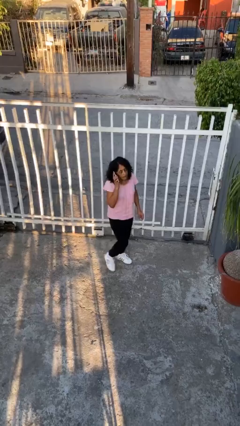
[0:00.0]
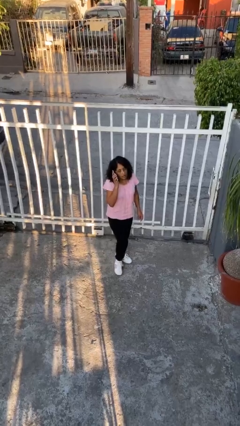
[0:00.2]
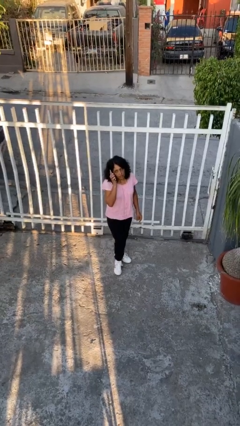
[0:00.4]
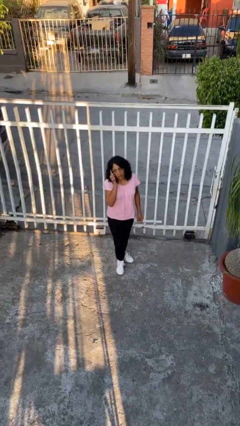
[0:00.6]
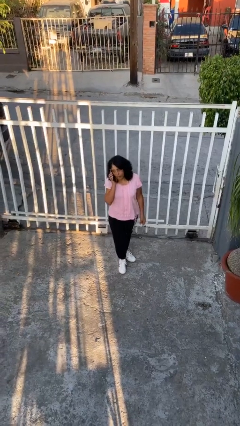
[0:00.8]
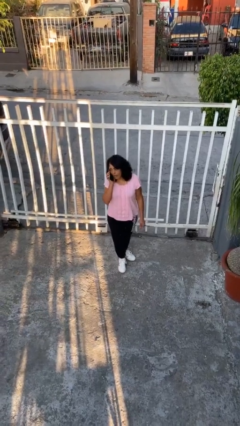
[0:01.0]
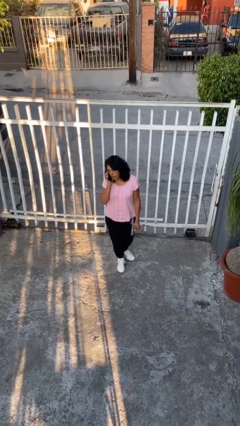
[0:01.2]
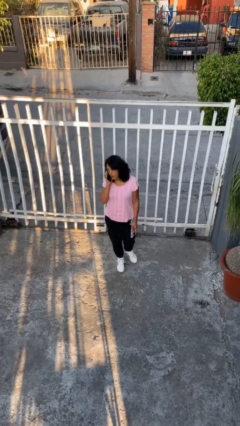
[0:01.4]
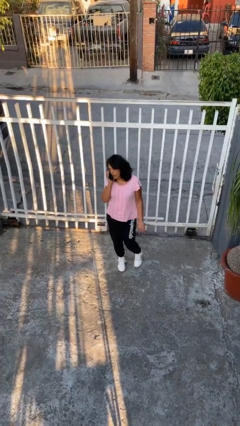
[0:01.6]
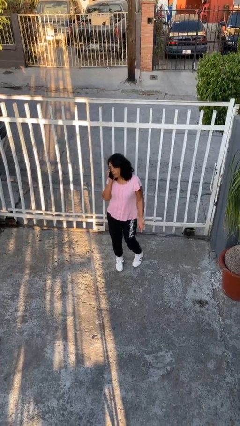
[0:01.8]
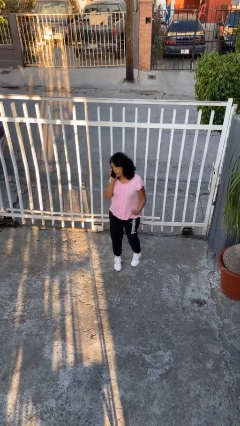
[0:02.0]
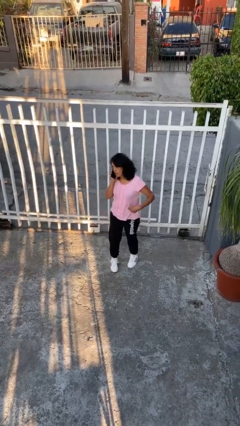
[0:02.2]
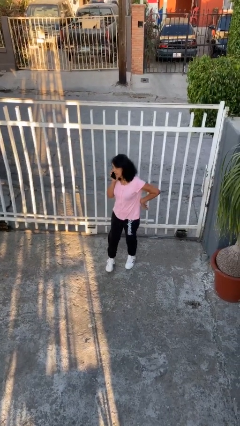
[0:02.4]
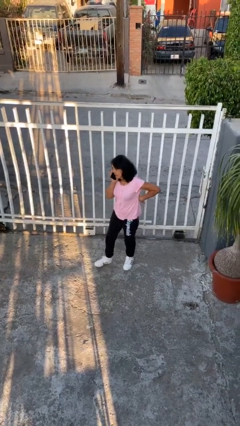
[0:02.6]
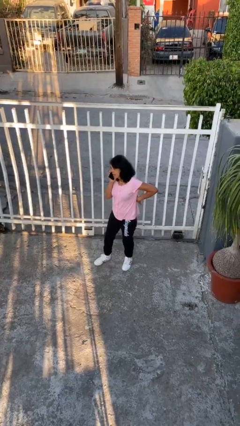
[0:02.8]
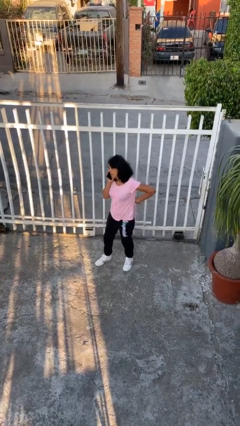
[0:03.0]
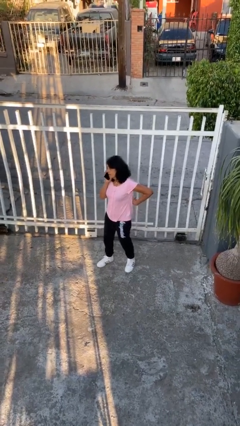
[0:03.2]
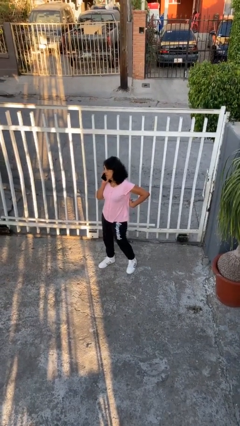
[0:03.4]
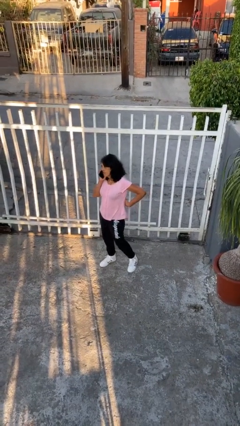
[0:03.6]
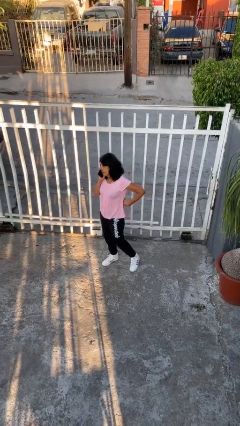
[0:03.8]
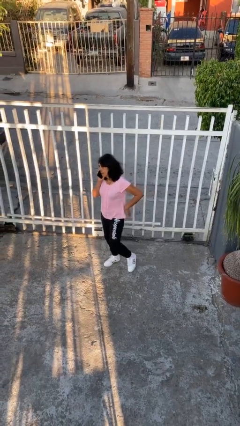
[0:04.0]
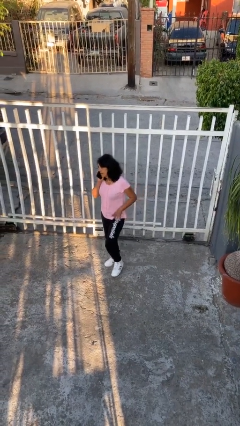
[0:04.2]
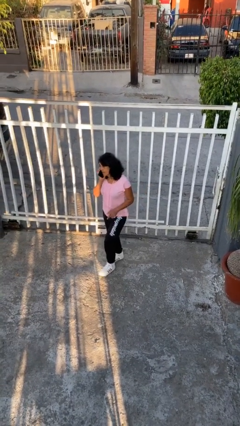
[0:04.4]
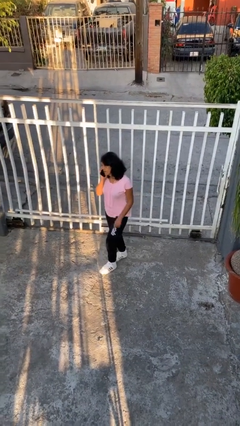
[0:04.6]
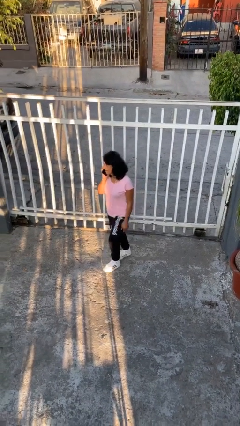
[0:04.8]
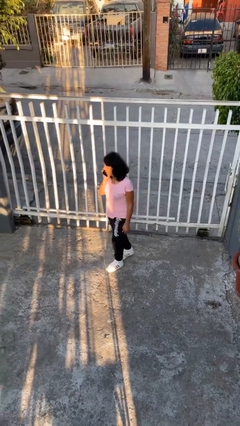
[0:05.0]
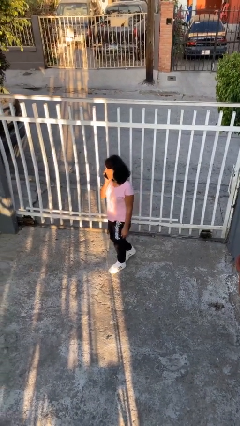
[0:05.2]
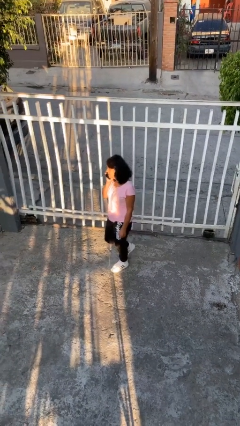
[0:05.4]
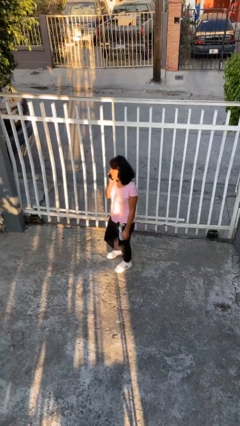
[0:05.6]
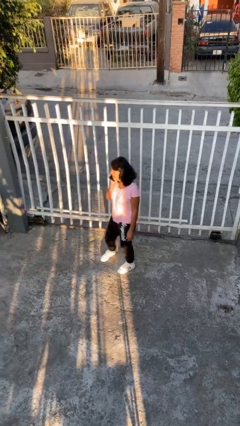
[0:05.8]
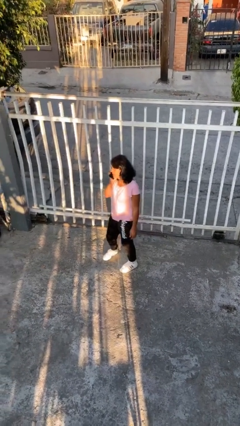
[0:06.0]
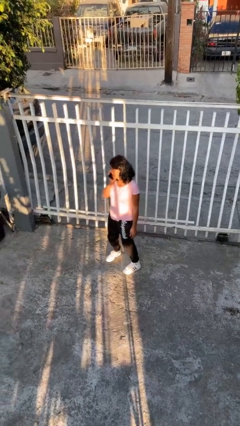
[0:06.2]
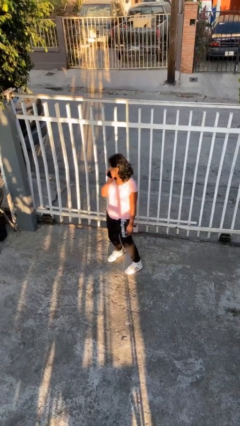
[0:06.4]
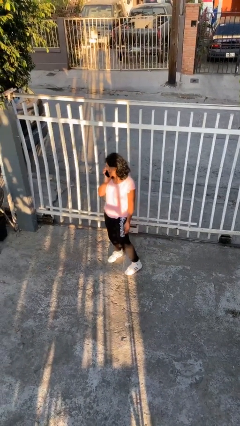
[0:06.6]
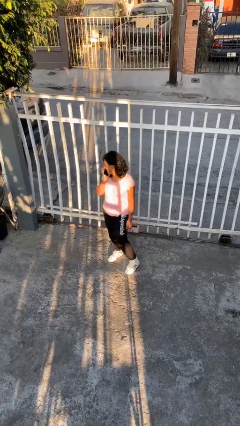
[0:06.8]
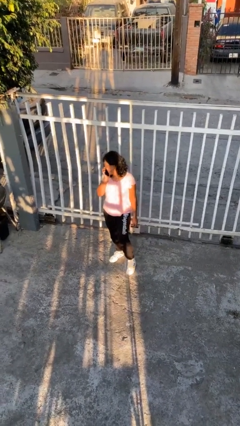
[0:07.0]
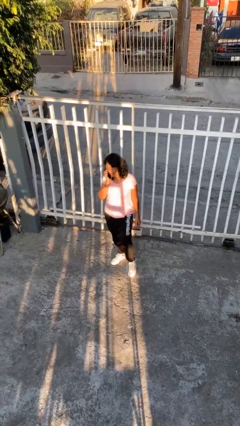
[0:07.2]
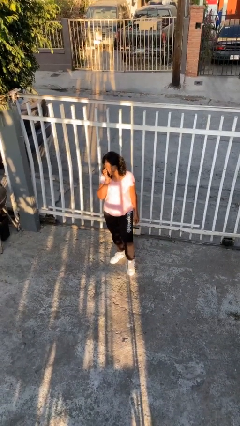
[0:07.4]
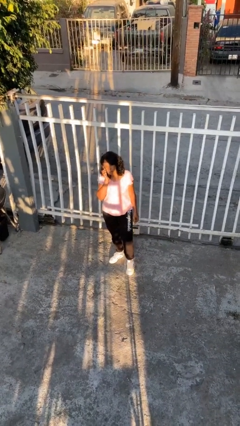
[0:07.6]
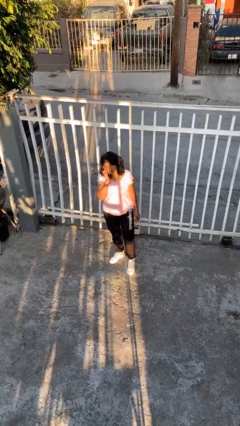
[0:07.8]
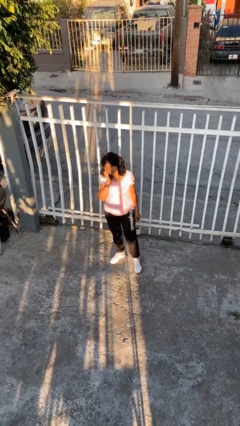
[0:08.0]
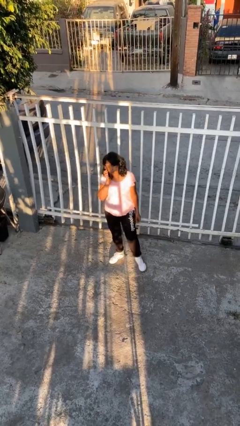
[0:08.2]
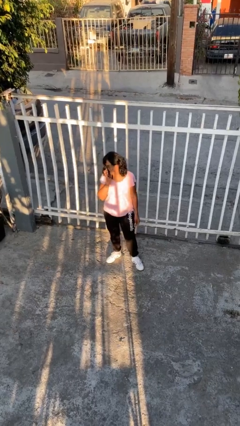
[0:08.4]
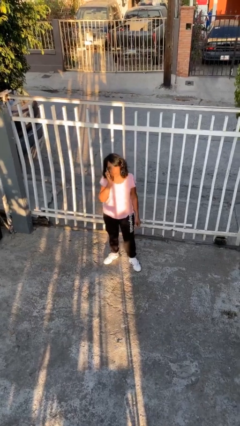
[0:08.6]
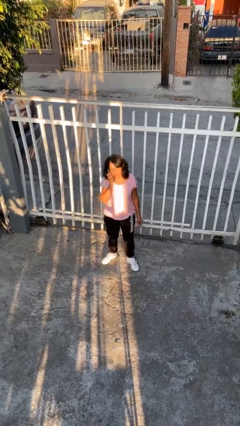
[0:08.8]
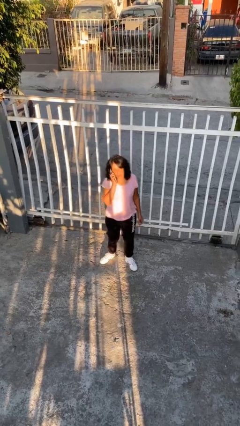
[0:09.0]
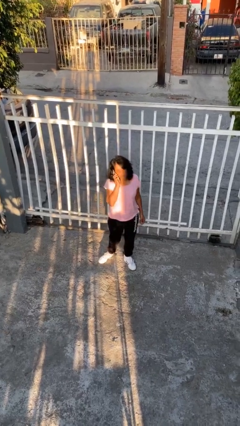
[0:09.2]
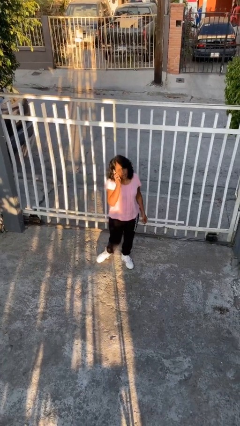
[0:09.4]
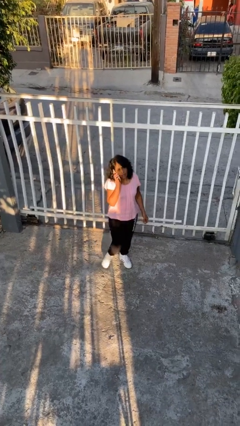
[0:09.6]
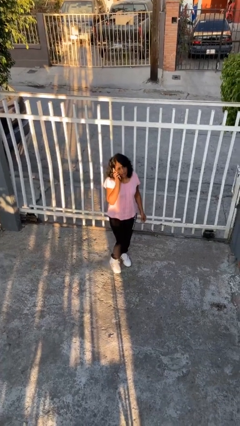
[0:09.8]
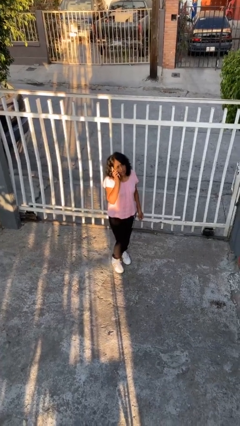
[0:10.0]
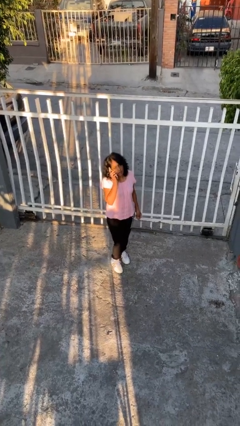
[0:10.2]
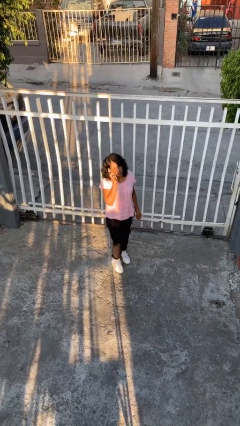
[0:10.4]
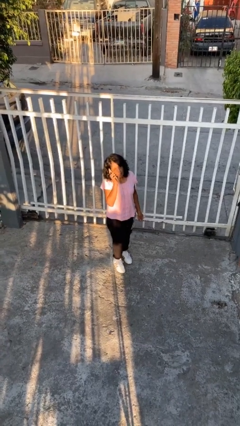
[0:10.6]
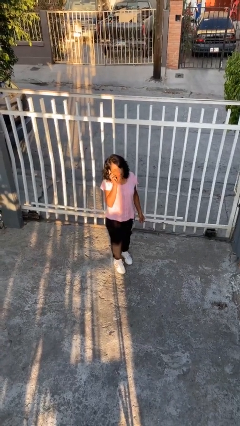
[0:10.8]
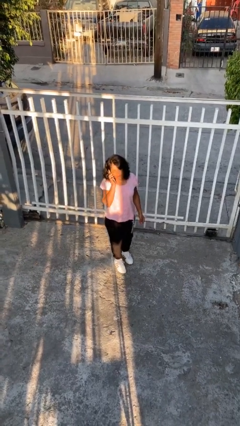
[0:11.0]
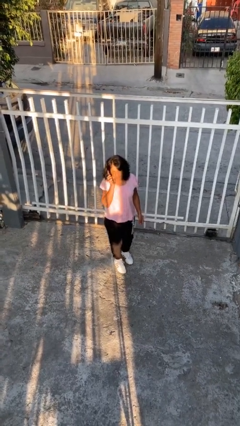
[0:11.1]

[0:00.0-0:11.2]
person talks on phone

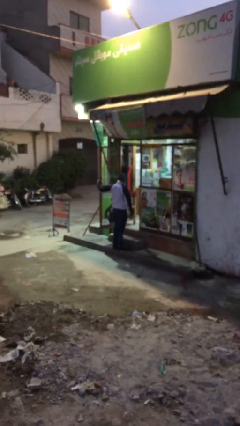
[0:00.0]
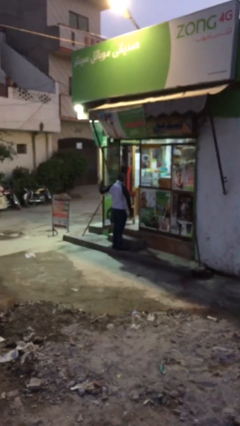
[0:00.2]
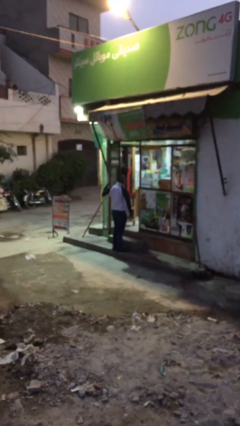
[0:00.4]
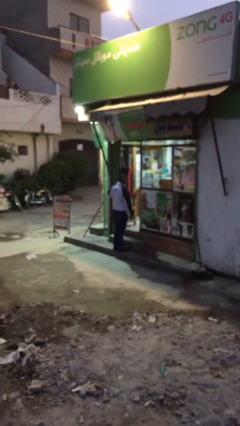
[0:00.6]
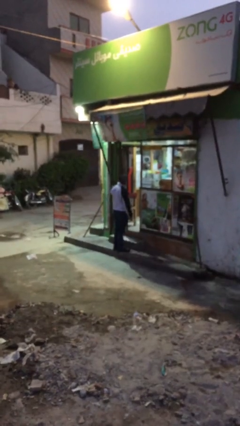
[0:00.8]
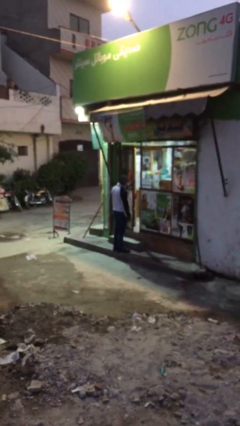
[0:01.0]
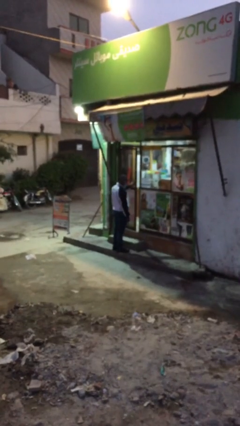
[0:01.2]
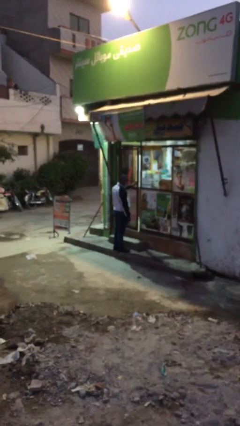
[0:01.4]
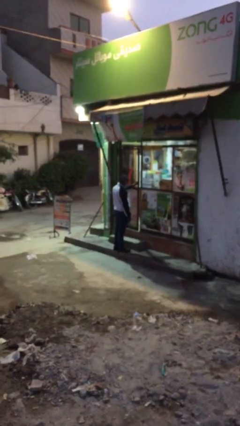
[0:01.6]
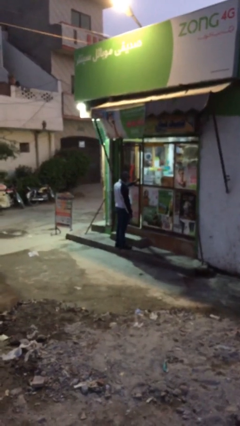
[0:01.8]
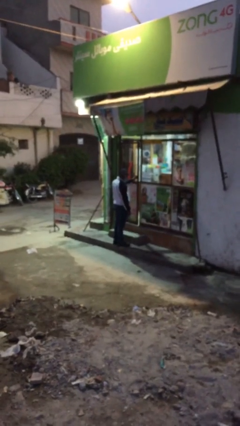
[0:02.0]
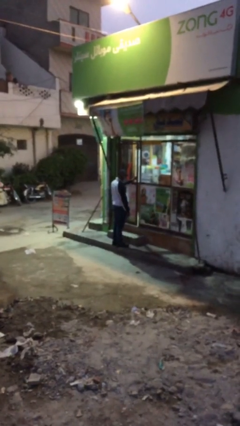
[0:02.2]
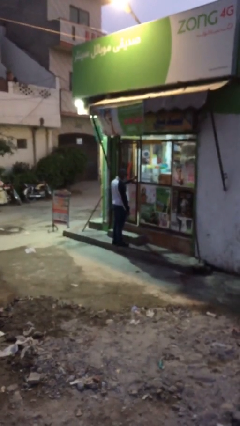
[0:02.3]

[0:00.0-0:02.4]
person closes facility door

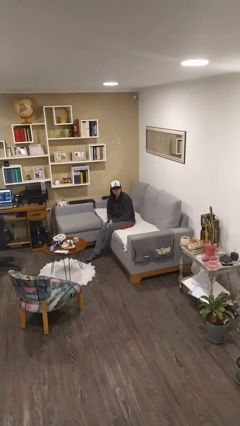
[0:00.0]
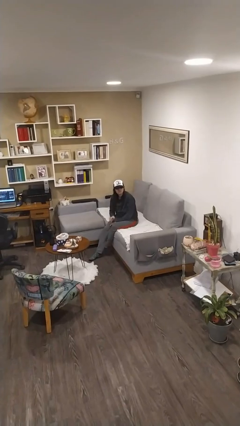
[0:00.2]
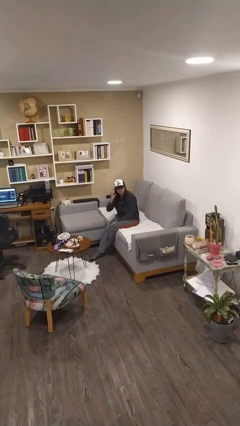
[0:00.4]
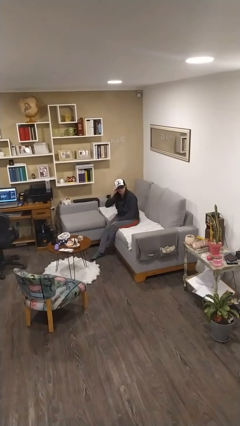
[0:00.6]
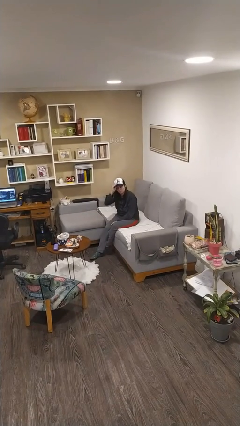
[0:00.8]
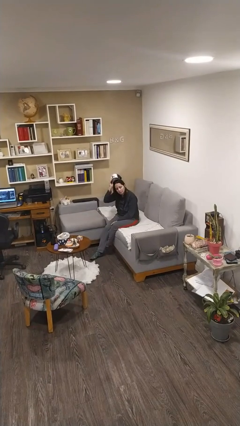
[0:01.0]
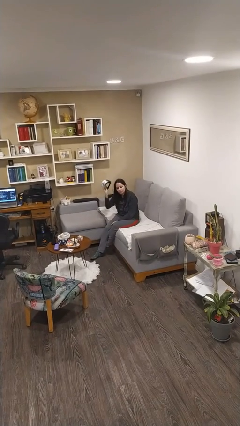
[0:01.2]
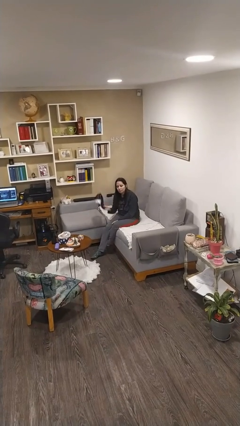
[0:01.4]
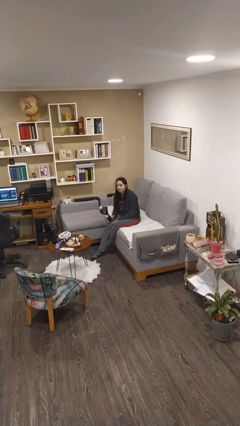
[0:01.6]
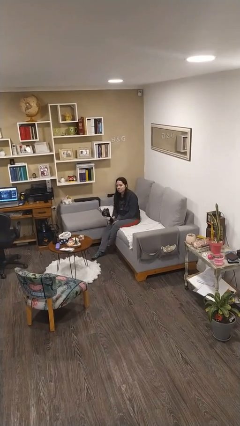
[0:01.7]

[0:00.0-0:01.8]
person takes off hat

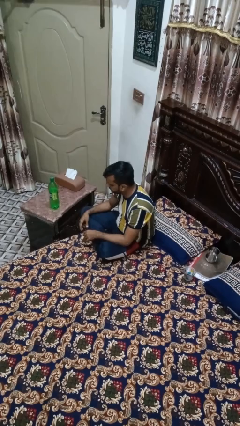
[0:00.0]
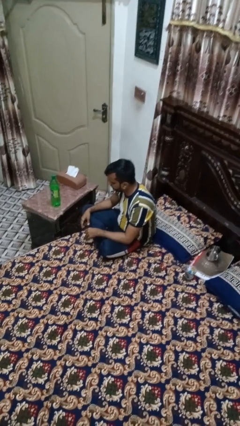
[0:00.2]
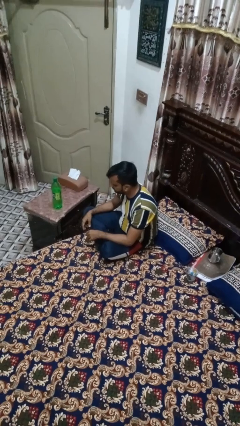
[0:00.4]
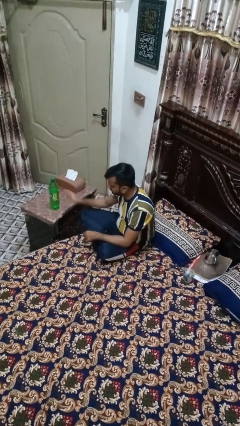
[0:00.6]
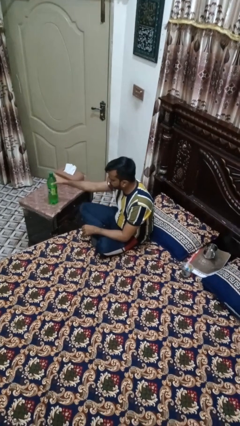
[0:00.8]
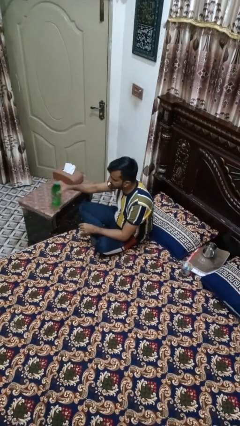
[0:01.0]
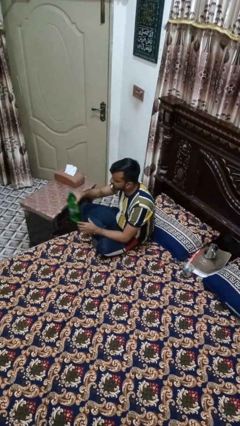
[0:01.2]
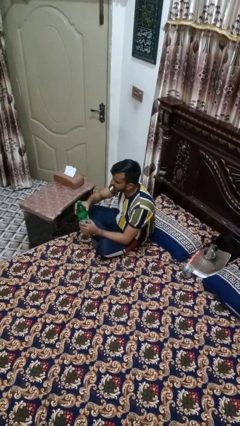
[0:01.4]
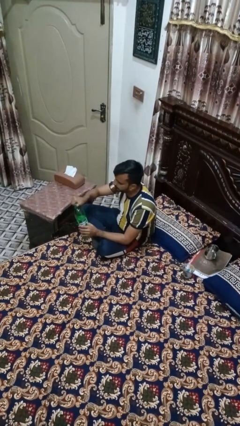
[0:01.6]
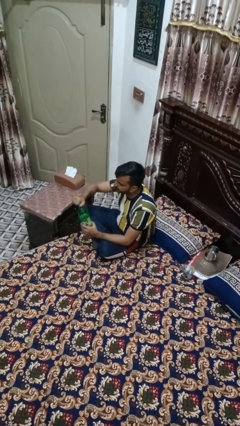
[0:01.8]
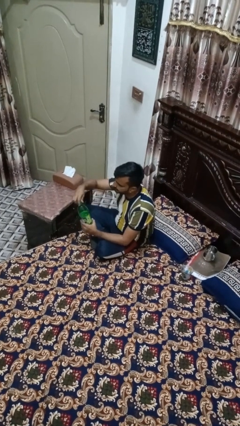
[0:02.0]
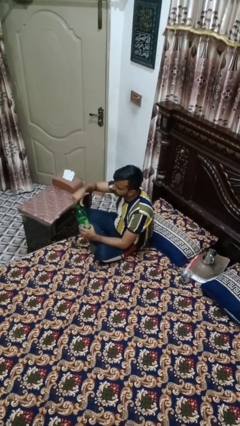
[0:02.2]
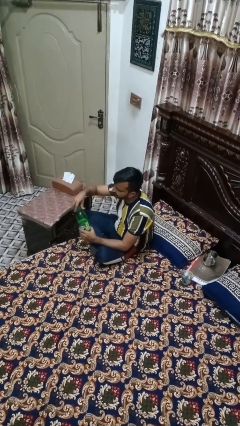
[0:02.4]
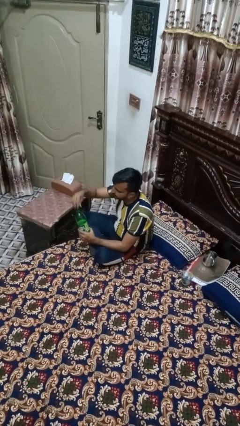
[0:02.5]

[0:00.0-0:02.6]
person unscrews lid from bottle

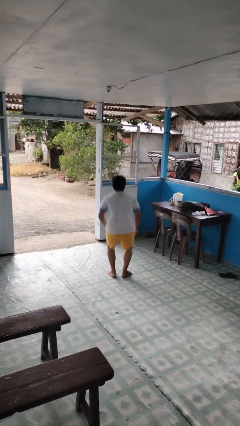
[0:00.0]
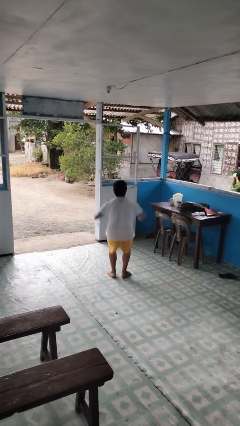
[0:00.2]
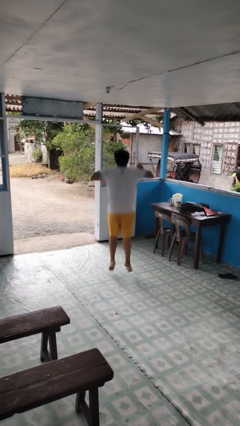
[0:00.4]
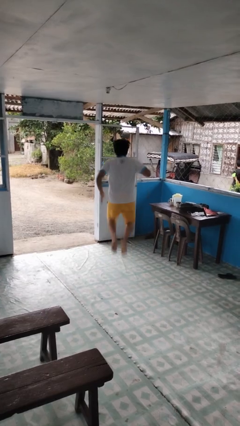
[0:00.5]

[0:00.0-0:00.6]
person jumps
